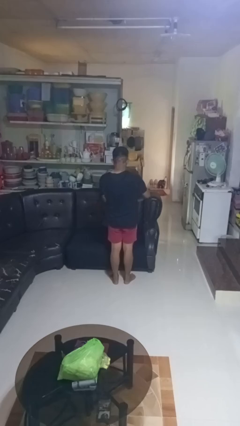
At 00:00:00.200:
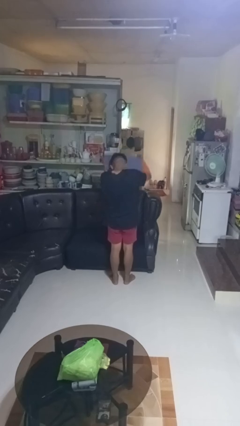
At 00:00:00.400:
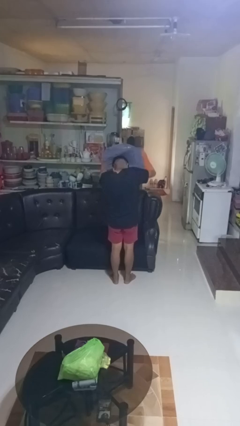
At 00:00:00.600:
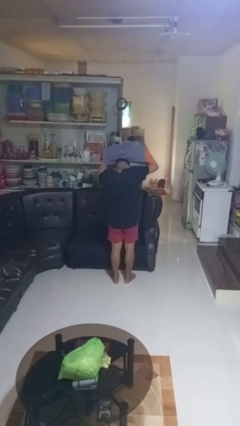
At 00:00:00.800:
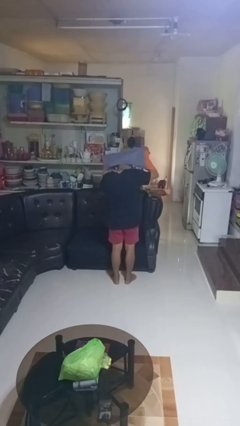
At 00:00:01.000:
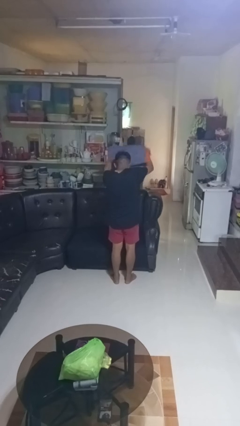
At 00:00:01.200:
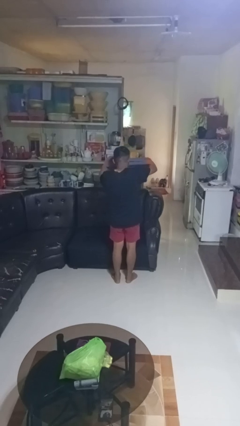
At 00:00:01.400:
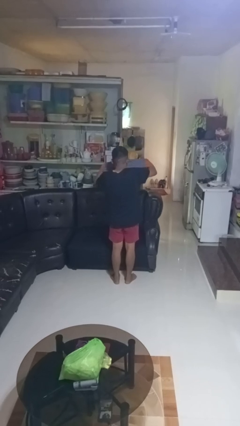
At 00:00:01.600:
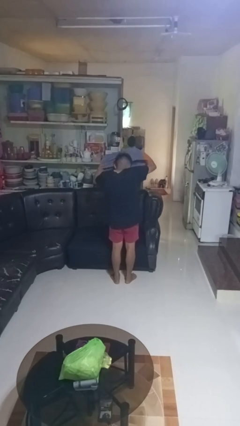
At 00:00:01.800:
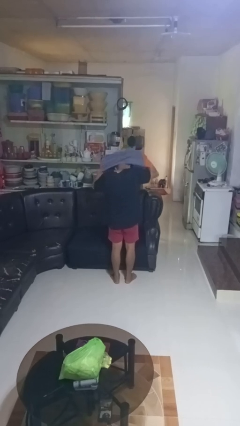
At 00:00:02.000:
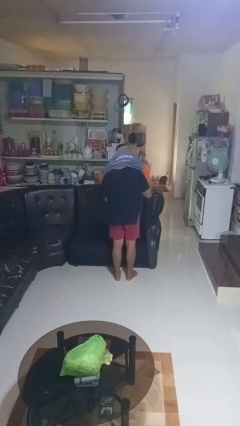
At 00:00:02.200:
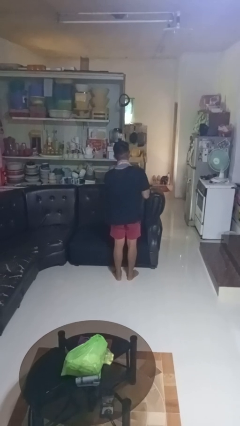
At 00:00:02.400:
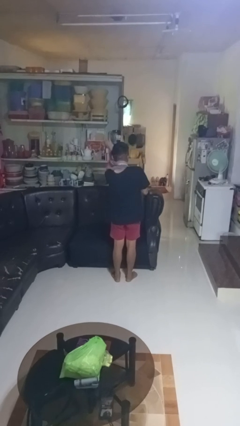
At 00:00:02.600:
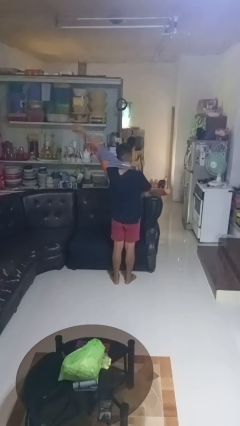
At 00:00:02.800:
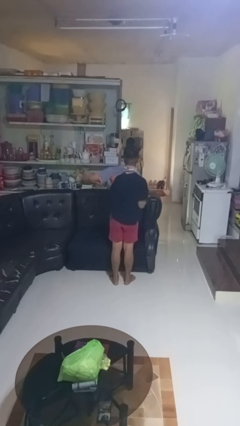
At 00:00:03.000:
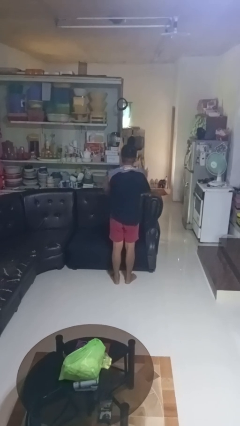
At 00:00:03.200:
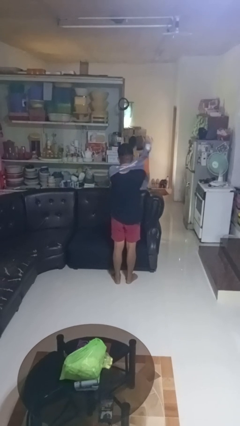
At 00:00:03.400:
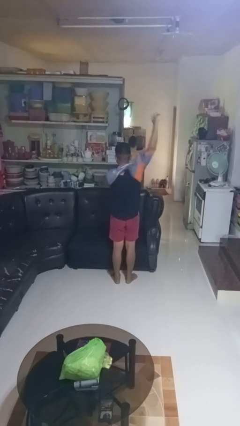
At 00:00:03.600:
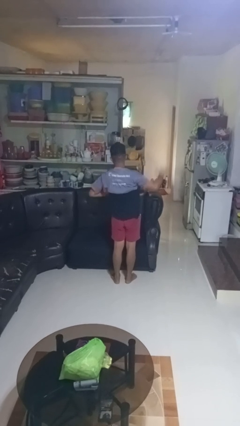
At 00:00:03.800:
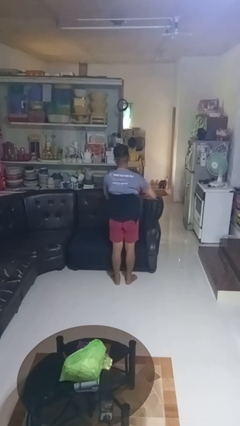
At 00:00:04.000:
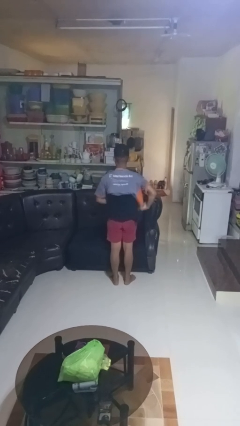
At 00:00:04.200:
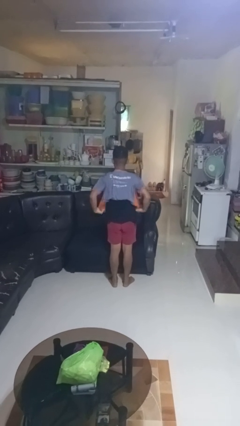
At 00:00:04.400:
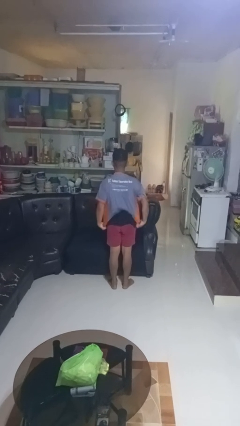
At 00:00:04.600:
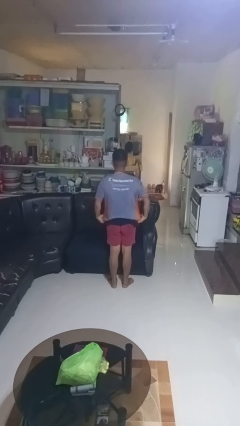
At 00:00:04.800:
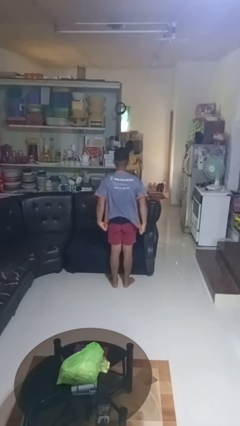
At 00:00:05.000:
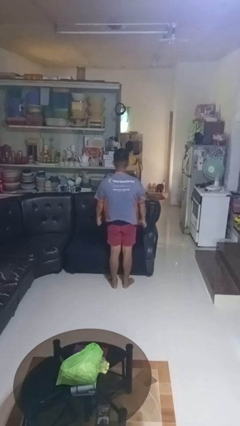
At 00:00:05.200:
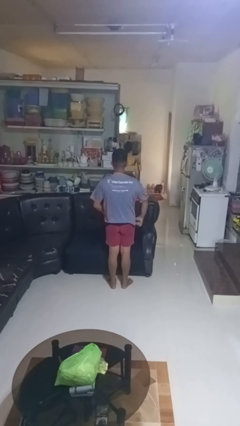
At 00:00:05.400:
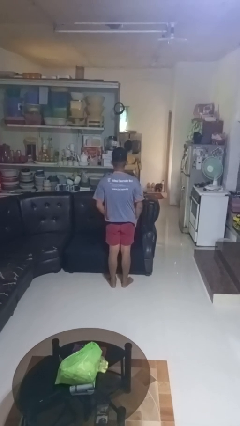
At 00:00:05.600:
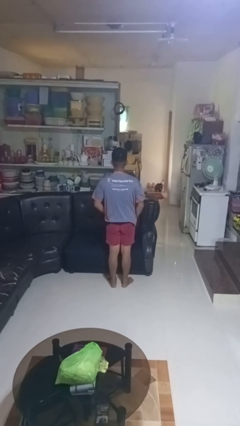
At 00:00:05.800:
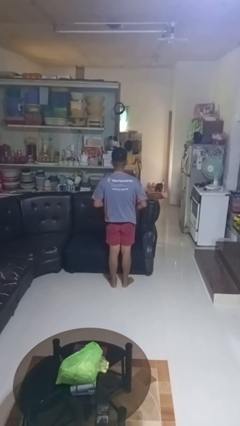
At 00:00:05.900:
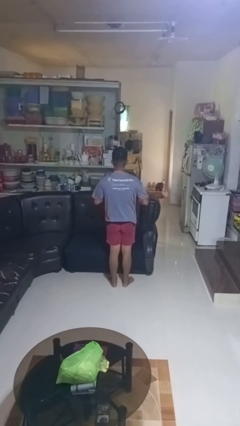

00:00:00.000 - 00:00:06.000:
person puts on shirt

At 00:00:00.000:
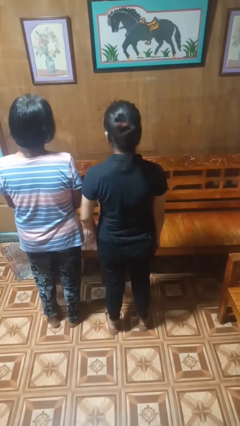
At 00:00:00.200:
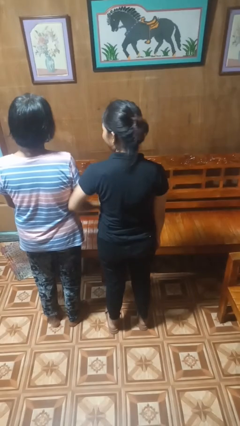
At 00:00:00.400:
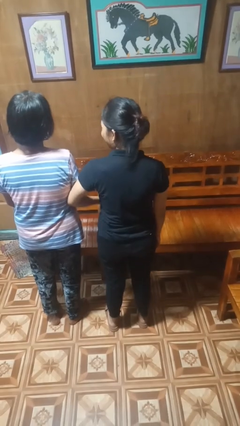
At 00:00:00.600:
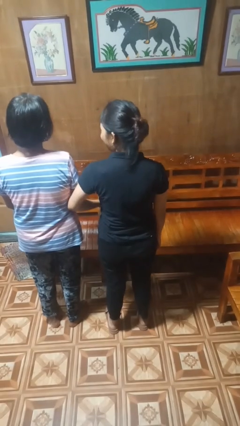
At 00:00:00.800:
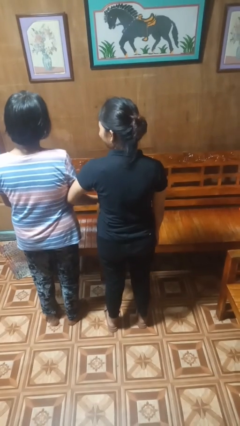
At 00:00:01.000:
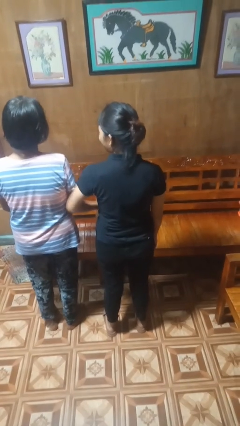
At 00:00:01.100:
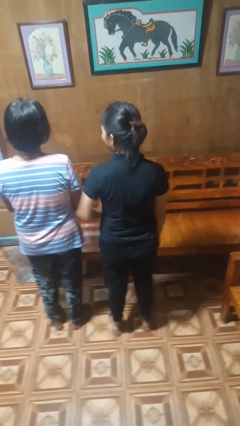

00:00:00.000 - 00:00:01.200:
person nudges person with elbow

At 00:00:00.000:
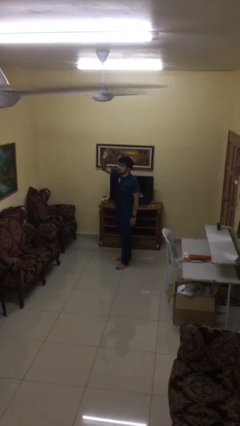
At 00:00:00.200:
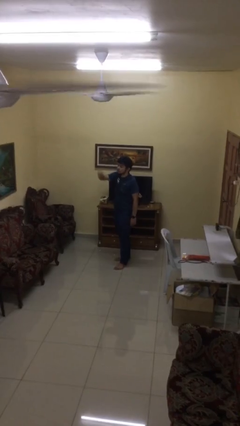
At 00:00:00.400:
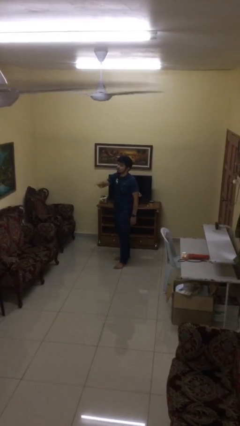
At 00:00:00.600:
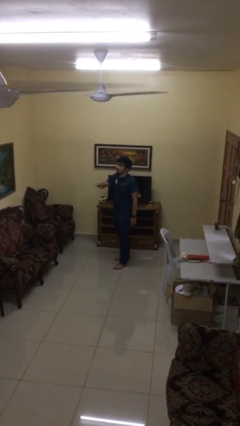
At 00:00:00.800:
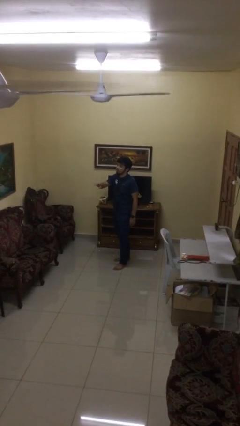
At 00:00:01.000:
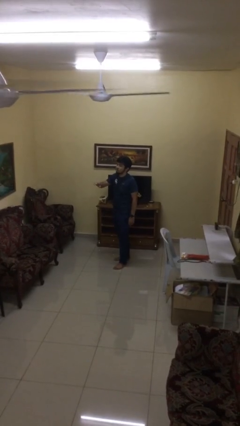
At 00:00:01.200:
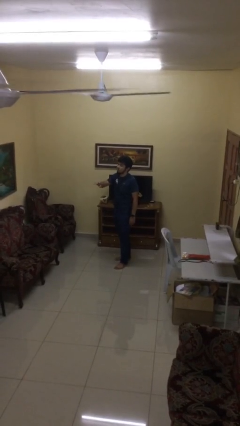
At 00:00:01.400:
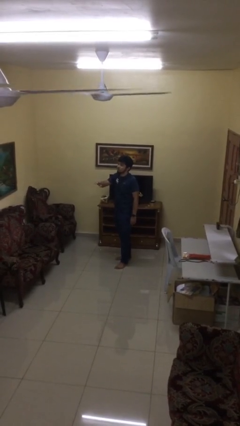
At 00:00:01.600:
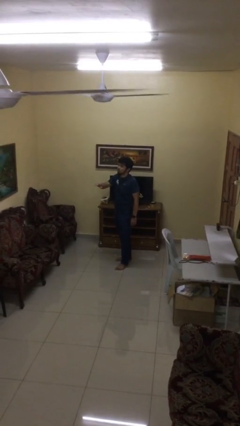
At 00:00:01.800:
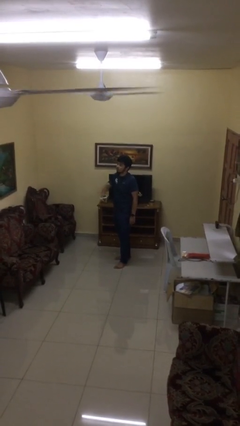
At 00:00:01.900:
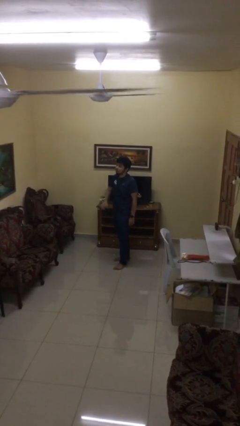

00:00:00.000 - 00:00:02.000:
person gestures swipe down

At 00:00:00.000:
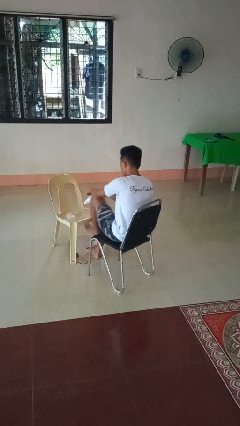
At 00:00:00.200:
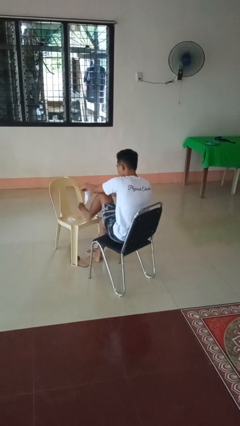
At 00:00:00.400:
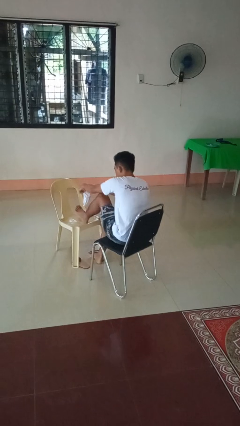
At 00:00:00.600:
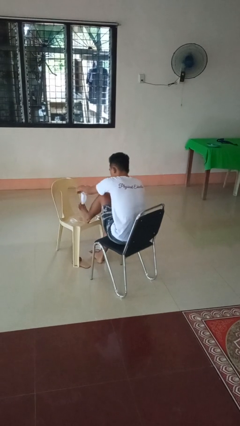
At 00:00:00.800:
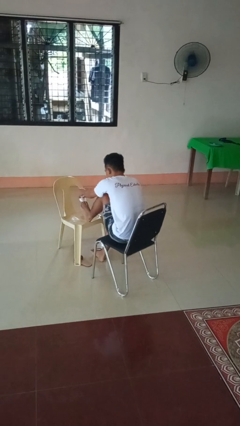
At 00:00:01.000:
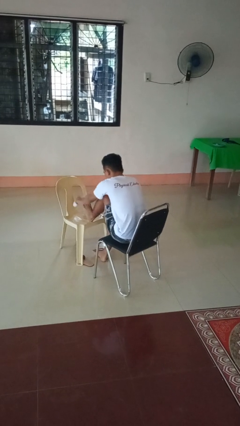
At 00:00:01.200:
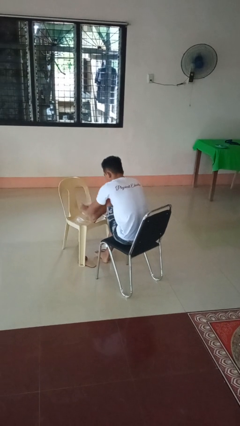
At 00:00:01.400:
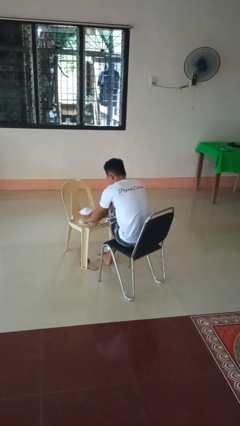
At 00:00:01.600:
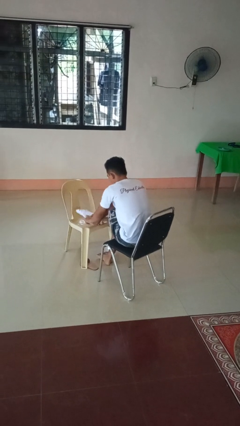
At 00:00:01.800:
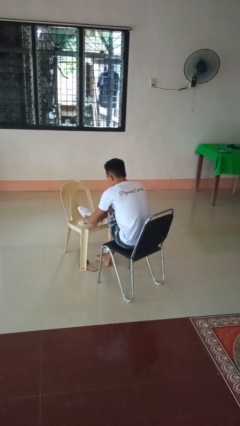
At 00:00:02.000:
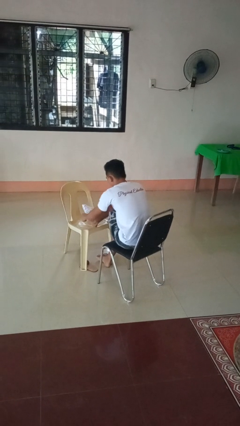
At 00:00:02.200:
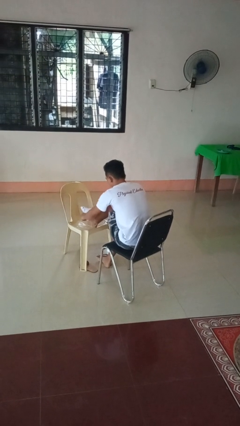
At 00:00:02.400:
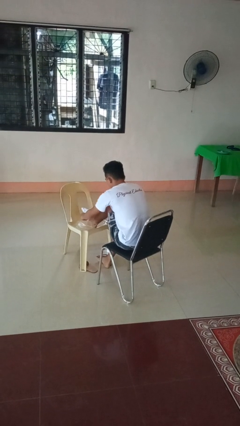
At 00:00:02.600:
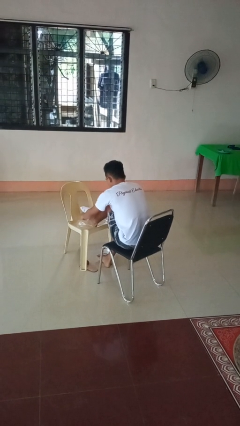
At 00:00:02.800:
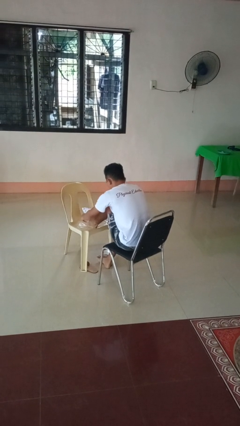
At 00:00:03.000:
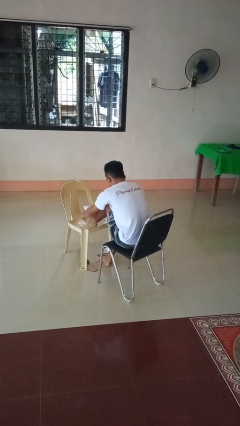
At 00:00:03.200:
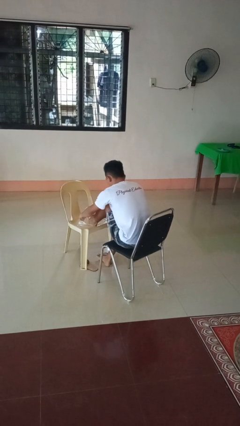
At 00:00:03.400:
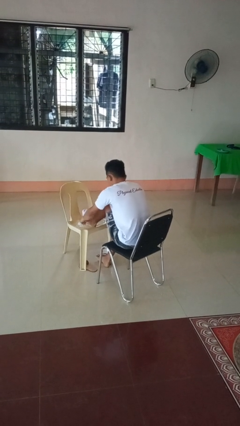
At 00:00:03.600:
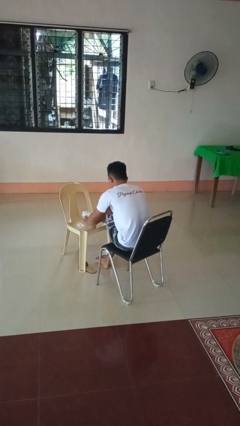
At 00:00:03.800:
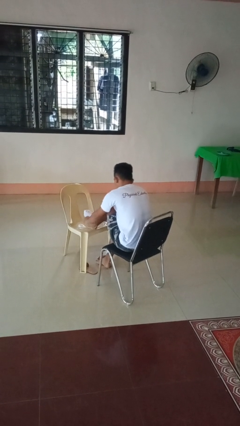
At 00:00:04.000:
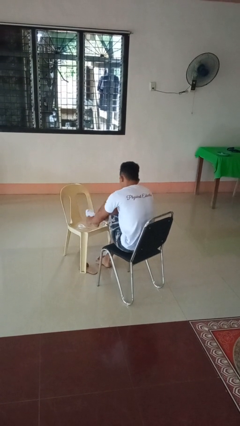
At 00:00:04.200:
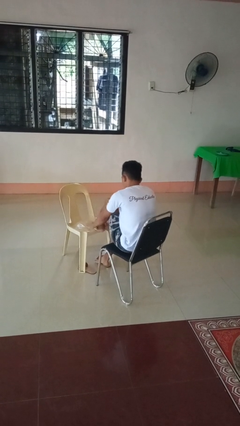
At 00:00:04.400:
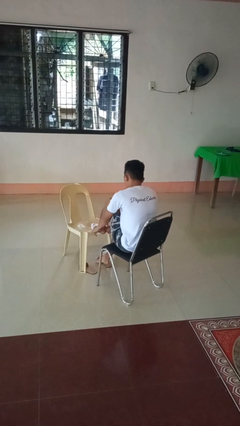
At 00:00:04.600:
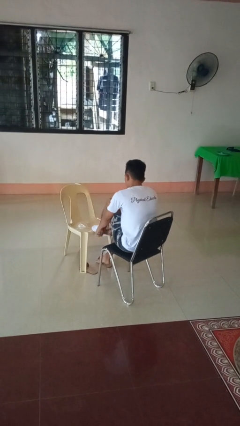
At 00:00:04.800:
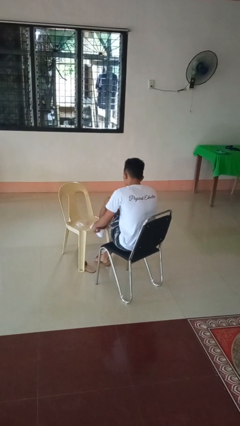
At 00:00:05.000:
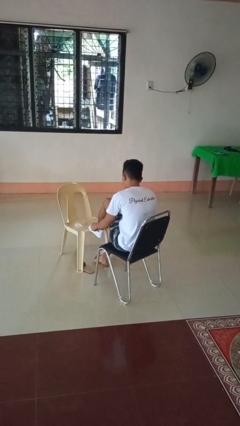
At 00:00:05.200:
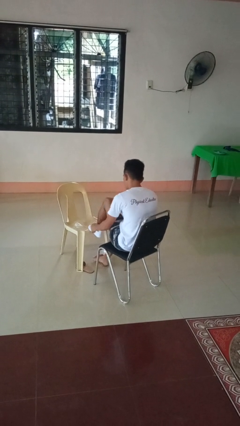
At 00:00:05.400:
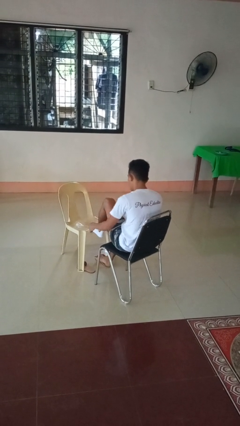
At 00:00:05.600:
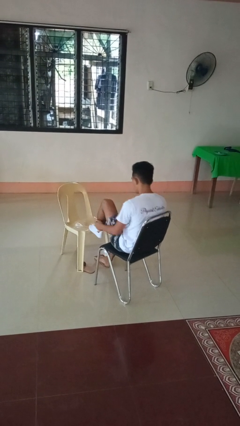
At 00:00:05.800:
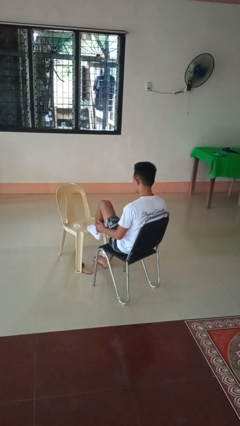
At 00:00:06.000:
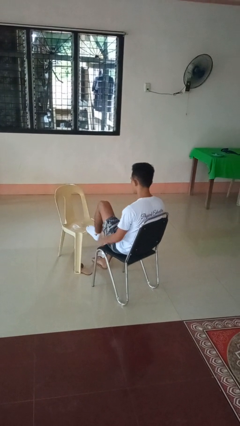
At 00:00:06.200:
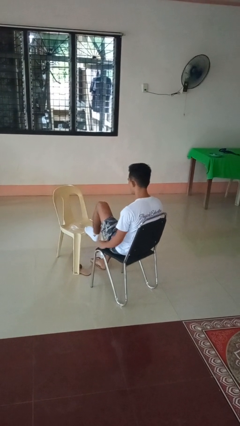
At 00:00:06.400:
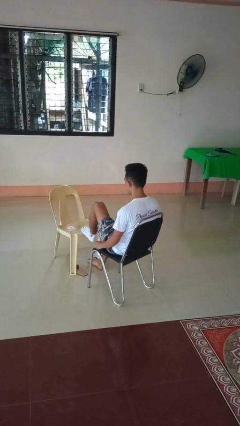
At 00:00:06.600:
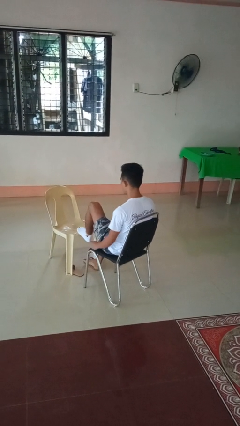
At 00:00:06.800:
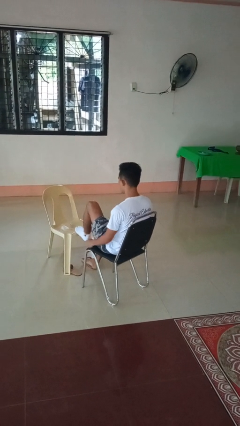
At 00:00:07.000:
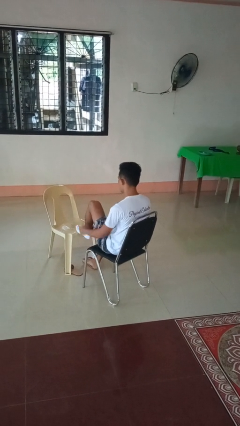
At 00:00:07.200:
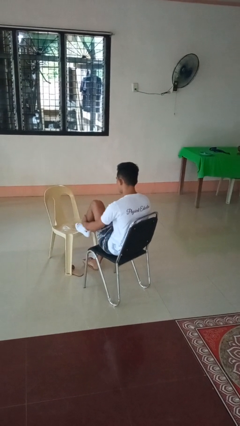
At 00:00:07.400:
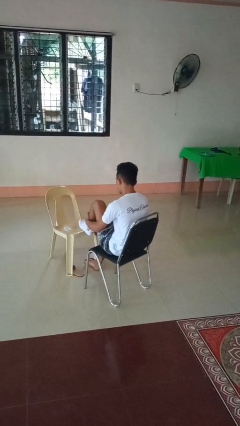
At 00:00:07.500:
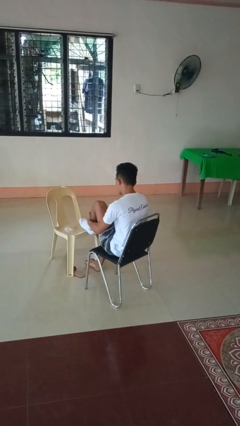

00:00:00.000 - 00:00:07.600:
person puts on socks

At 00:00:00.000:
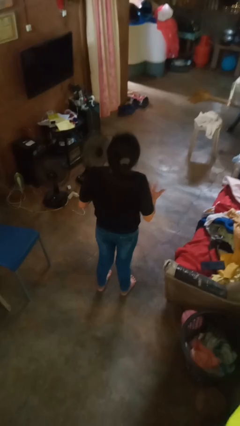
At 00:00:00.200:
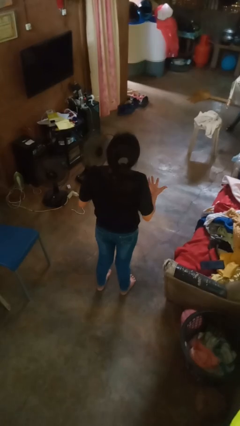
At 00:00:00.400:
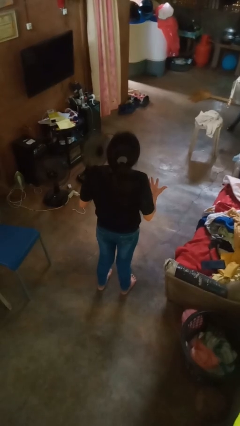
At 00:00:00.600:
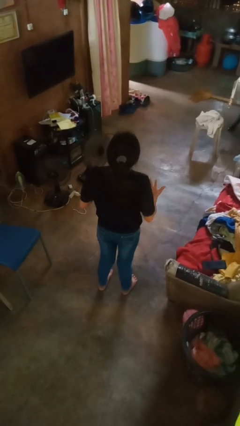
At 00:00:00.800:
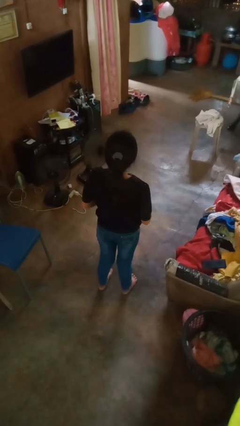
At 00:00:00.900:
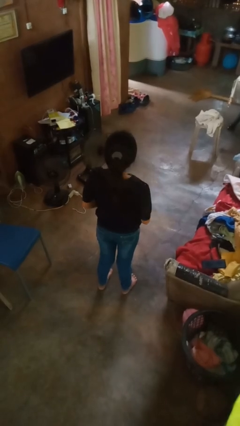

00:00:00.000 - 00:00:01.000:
person shrugs
